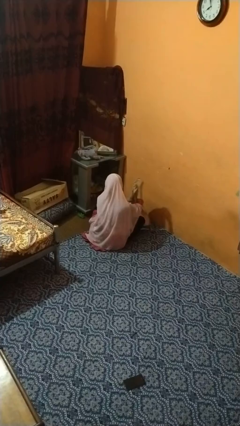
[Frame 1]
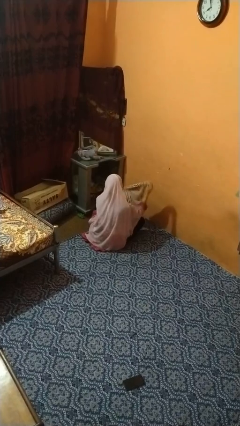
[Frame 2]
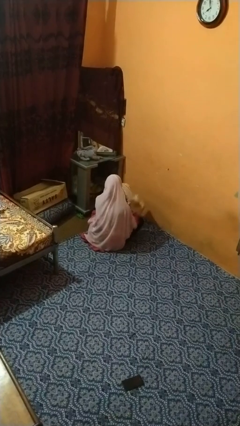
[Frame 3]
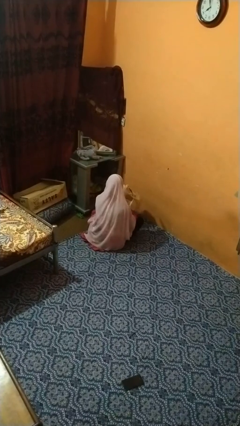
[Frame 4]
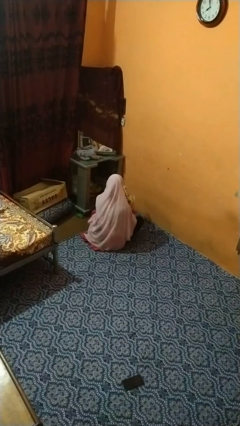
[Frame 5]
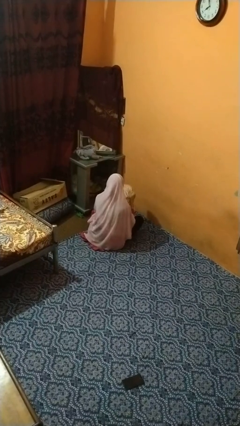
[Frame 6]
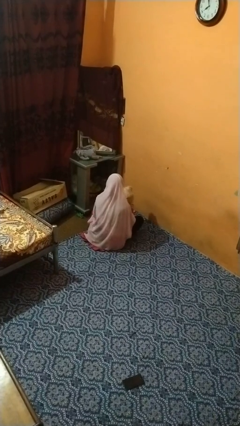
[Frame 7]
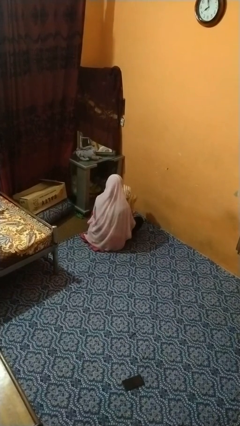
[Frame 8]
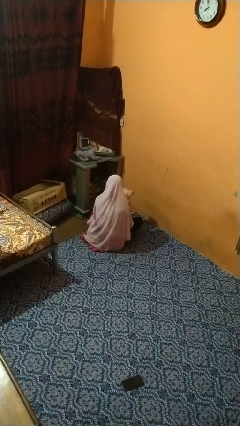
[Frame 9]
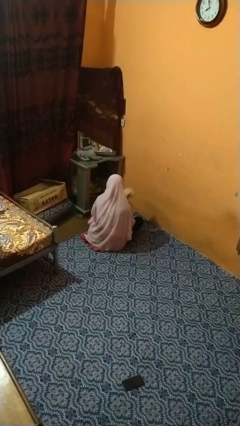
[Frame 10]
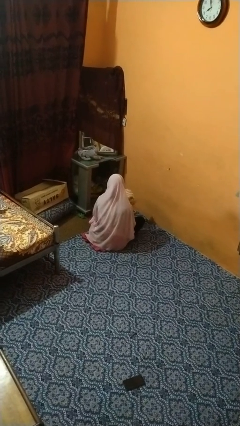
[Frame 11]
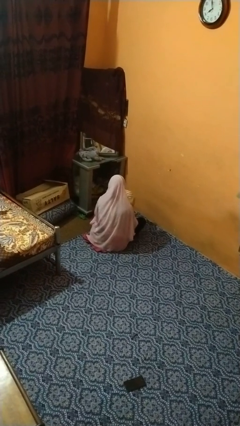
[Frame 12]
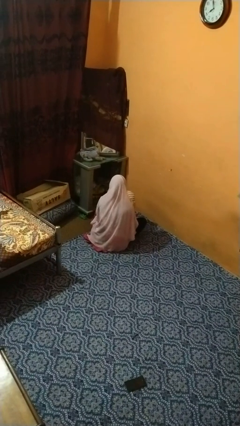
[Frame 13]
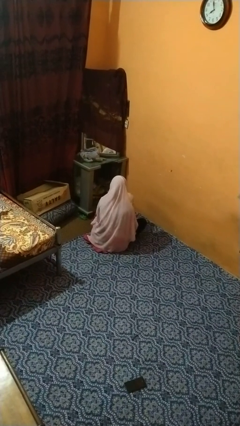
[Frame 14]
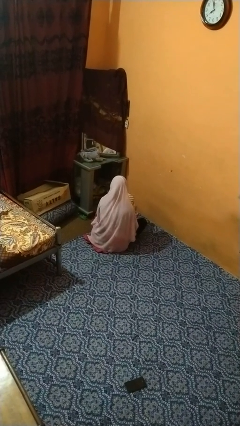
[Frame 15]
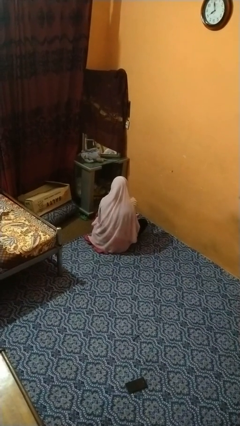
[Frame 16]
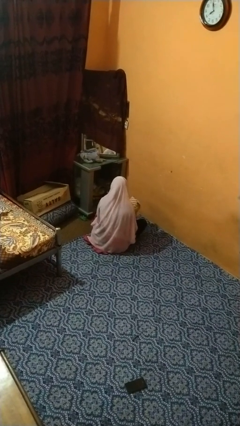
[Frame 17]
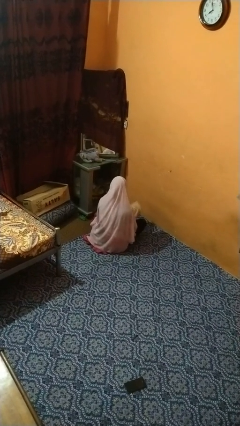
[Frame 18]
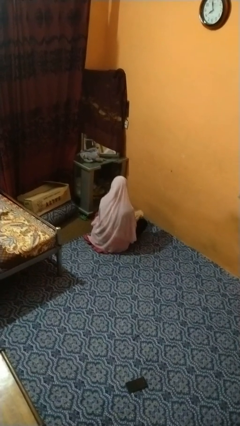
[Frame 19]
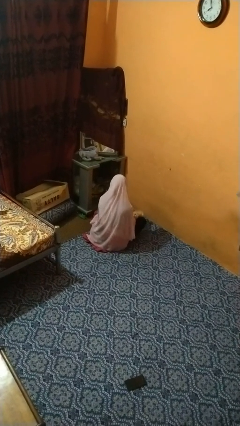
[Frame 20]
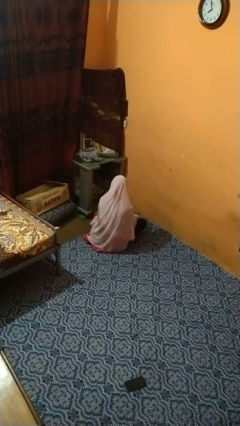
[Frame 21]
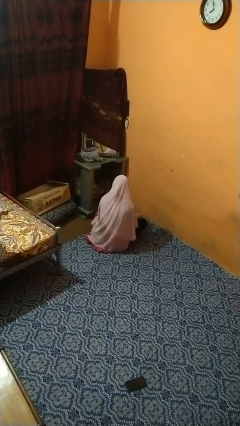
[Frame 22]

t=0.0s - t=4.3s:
person folds towel

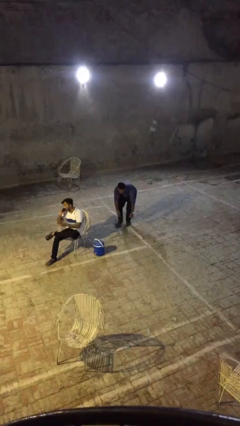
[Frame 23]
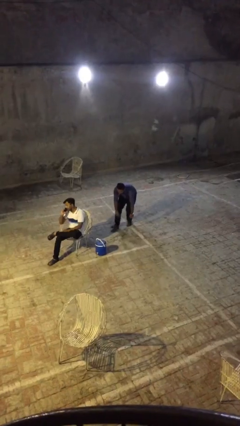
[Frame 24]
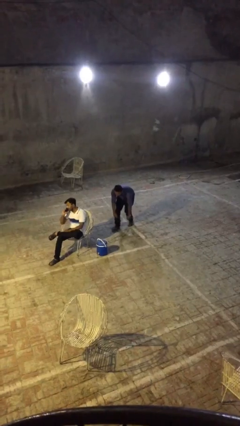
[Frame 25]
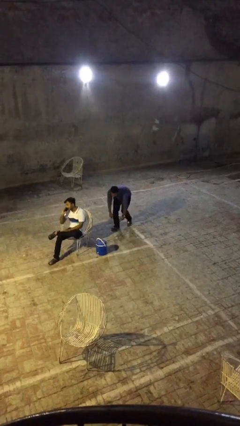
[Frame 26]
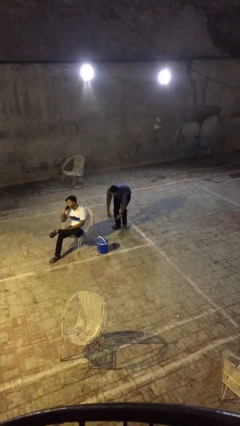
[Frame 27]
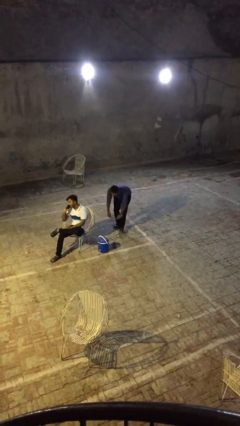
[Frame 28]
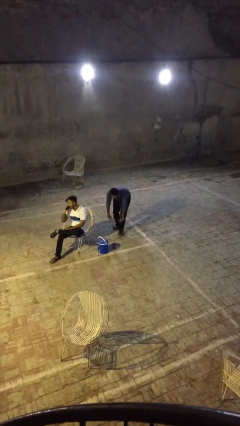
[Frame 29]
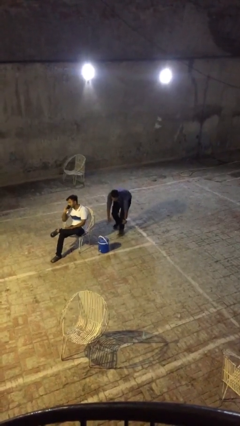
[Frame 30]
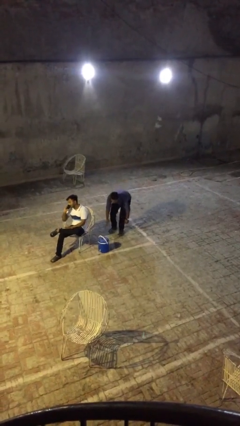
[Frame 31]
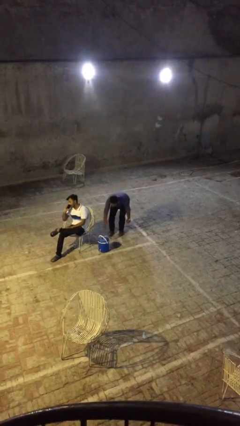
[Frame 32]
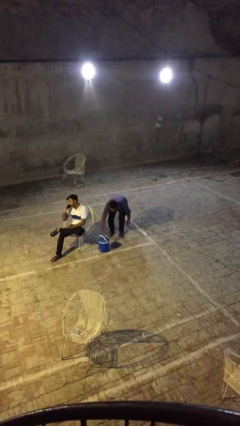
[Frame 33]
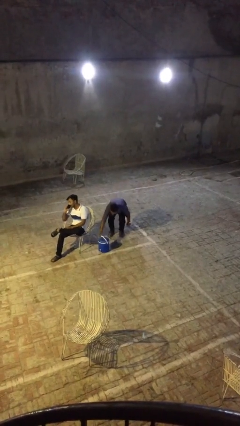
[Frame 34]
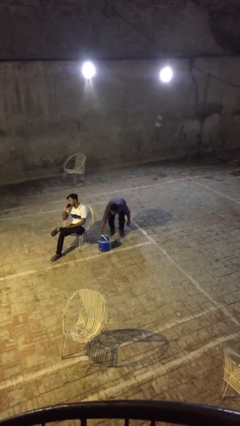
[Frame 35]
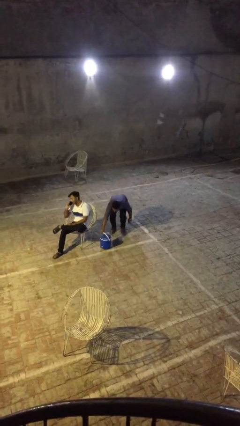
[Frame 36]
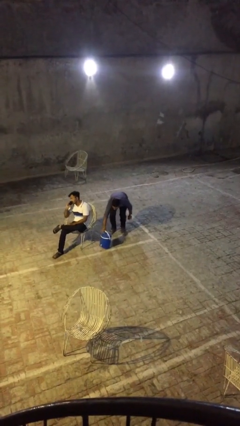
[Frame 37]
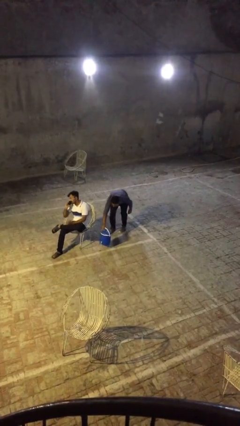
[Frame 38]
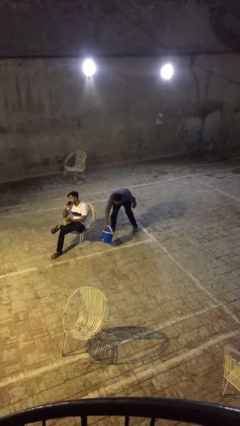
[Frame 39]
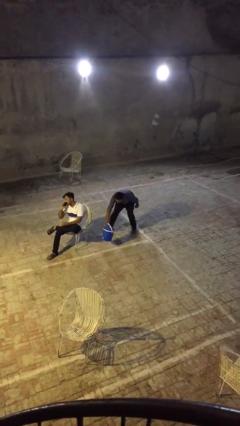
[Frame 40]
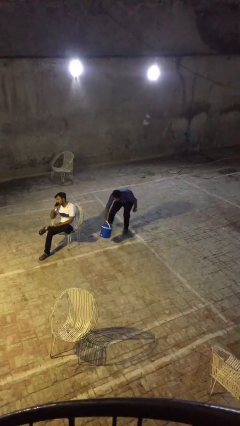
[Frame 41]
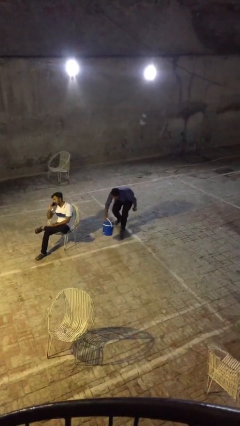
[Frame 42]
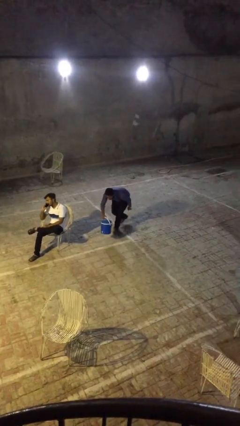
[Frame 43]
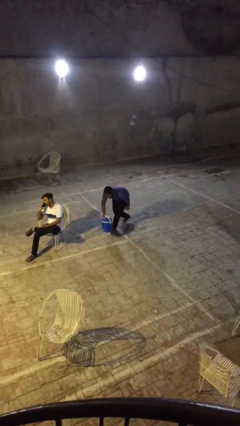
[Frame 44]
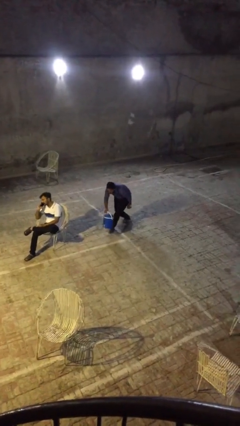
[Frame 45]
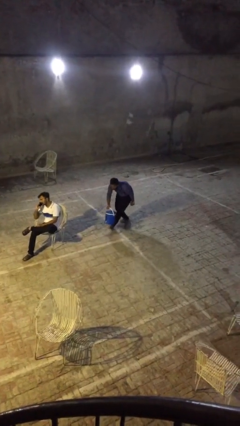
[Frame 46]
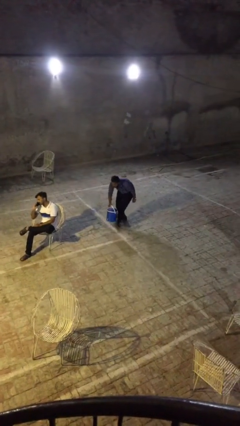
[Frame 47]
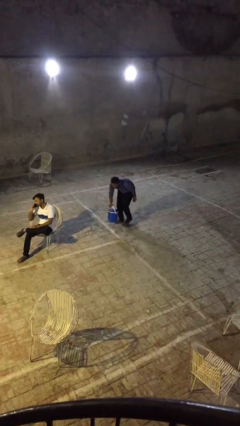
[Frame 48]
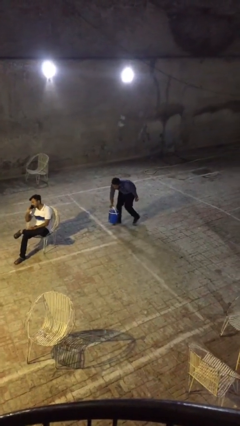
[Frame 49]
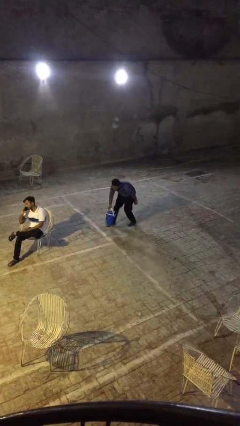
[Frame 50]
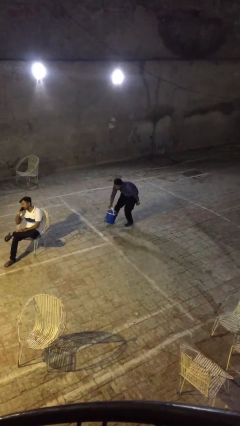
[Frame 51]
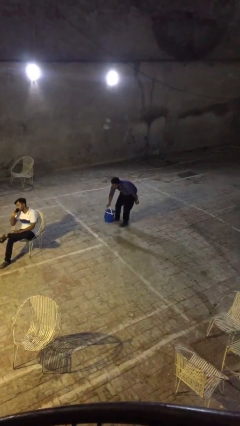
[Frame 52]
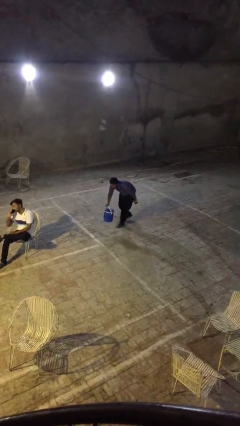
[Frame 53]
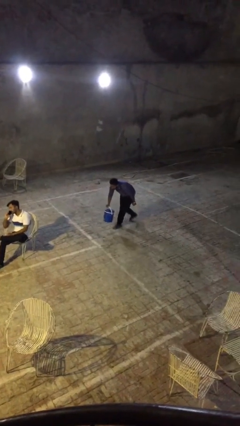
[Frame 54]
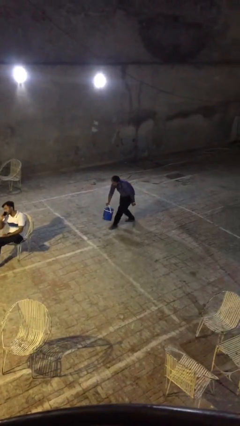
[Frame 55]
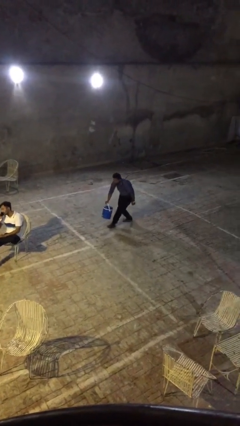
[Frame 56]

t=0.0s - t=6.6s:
person steals object from person

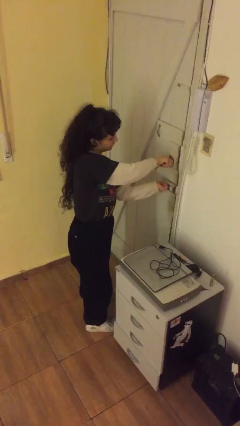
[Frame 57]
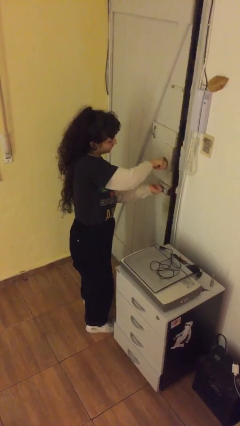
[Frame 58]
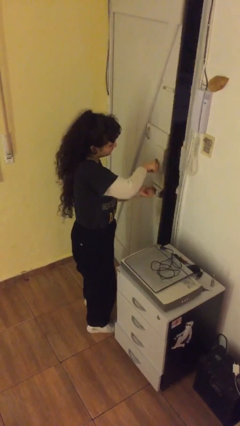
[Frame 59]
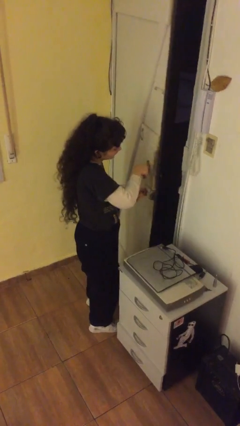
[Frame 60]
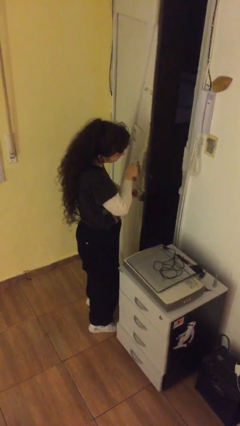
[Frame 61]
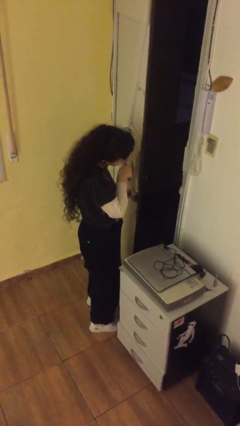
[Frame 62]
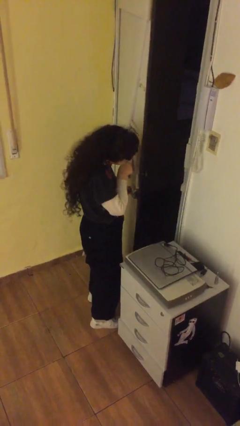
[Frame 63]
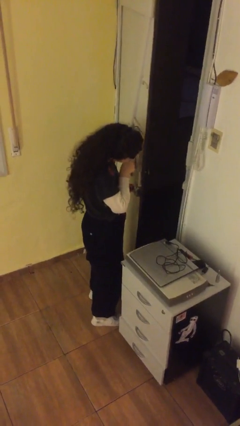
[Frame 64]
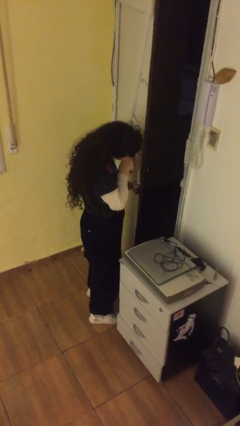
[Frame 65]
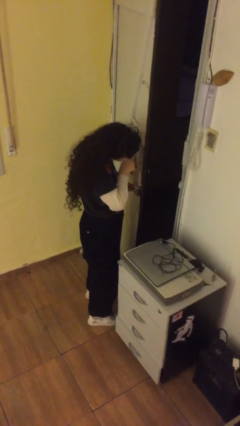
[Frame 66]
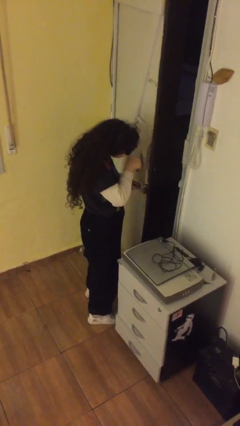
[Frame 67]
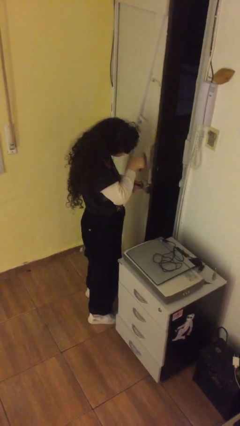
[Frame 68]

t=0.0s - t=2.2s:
person opens facility door

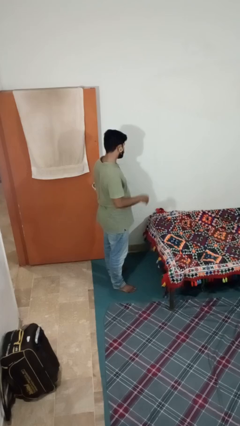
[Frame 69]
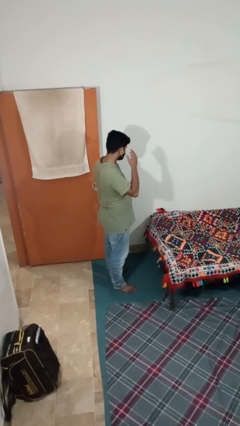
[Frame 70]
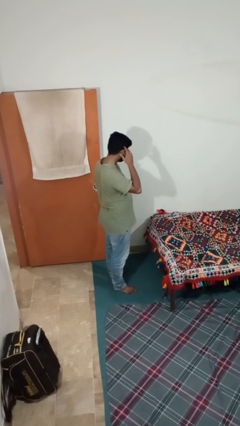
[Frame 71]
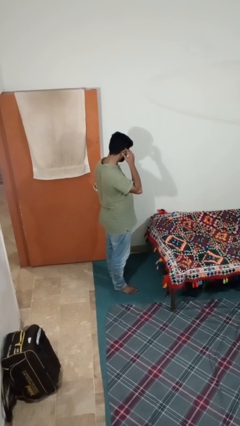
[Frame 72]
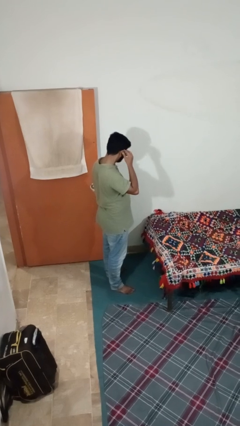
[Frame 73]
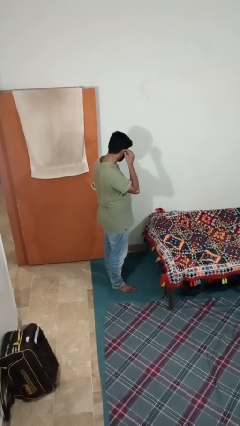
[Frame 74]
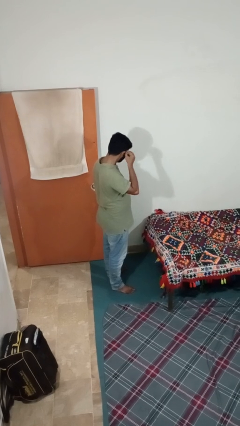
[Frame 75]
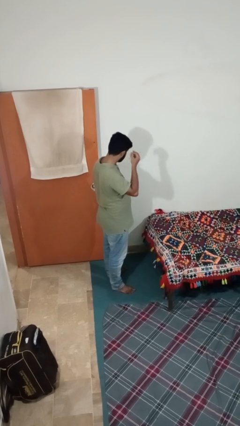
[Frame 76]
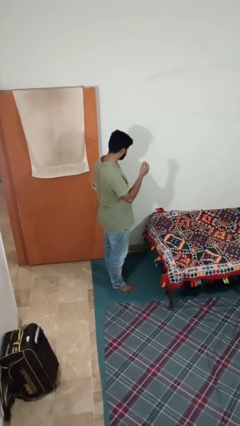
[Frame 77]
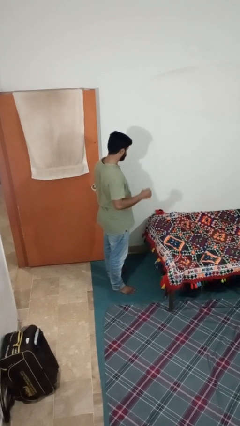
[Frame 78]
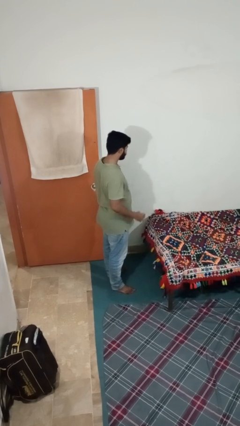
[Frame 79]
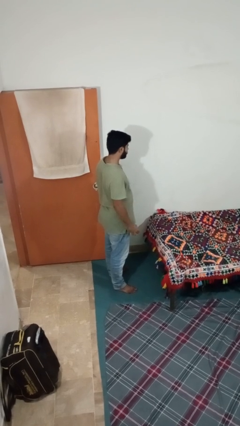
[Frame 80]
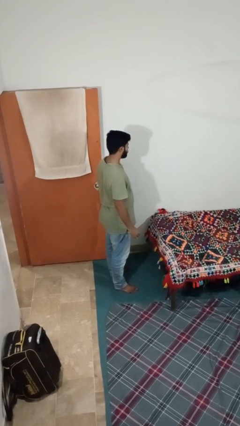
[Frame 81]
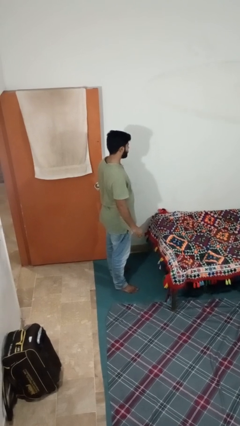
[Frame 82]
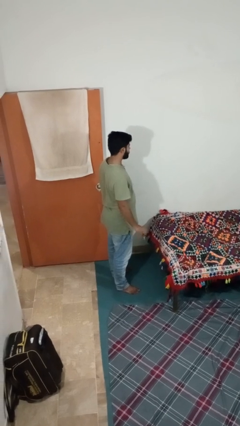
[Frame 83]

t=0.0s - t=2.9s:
person takes off earrings

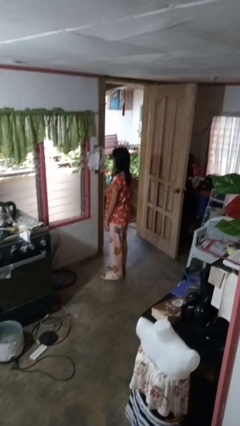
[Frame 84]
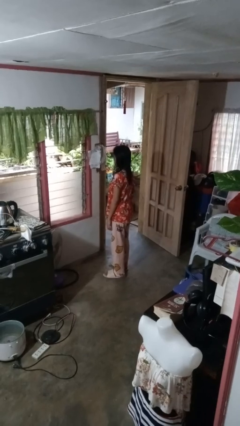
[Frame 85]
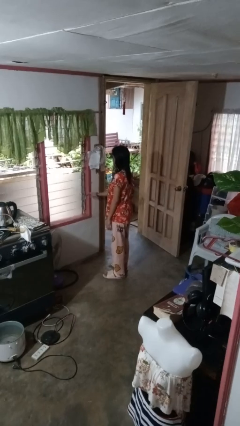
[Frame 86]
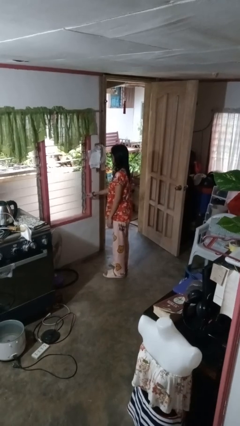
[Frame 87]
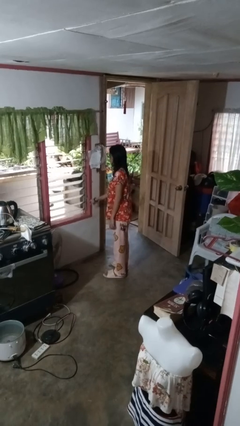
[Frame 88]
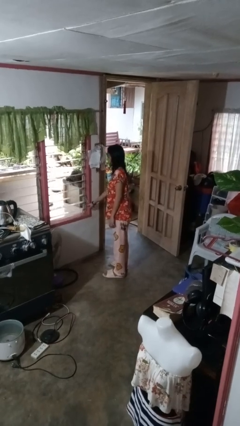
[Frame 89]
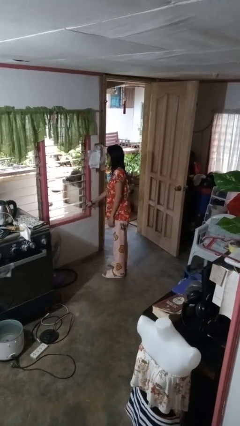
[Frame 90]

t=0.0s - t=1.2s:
person opens home window

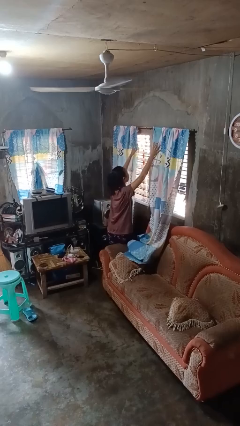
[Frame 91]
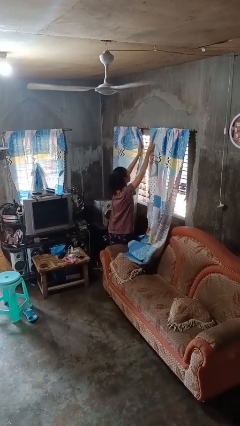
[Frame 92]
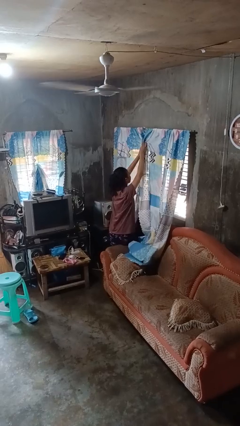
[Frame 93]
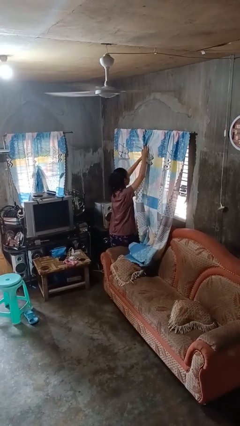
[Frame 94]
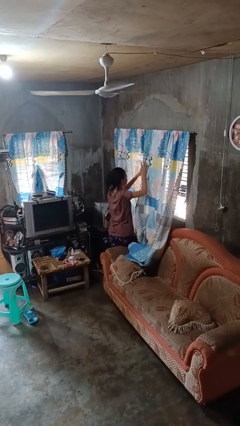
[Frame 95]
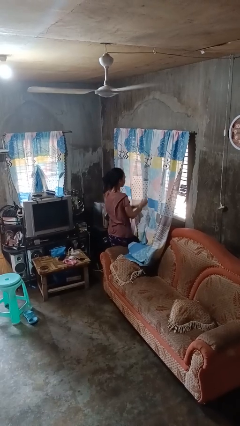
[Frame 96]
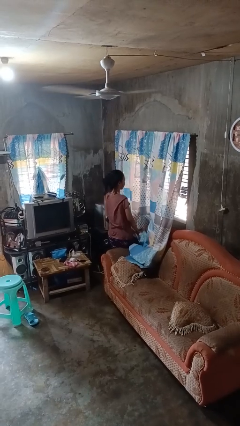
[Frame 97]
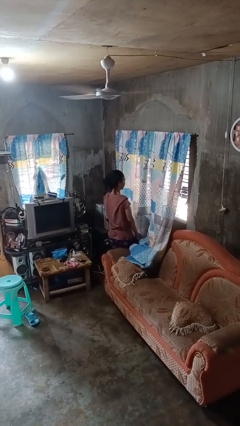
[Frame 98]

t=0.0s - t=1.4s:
person closes curtains
